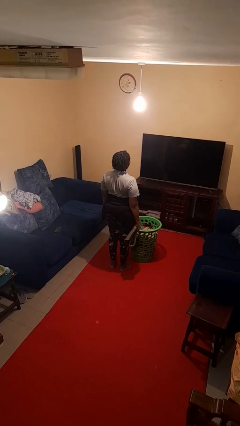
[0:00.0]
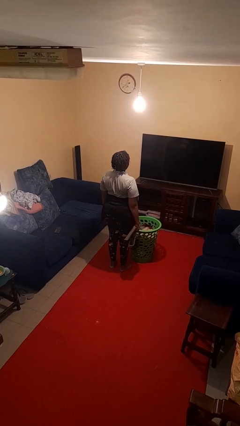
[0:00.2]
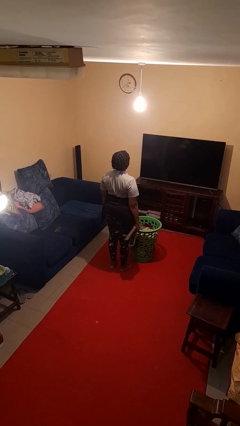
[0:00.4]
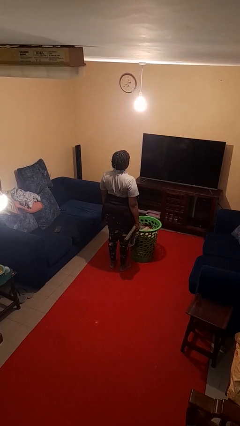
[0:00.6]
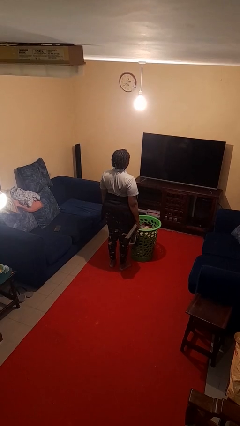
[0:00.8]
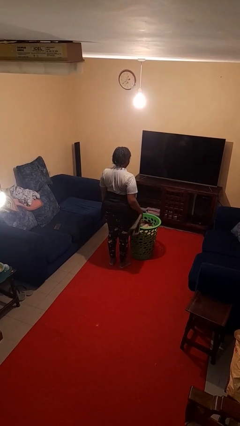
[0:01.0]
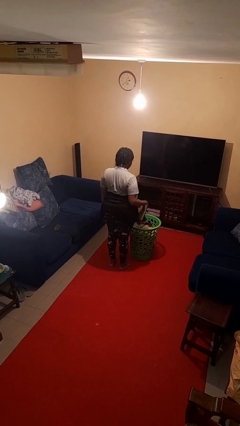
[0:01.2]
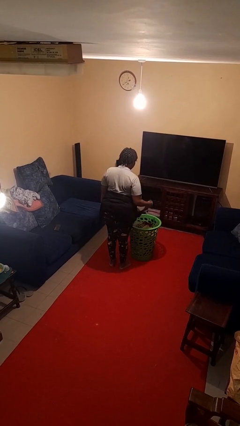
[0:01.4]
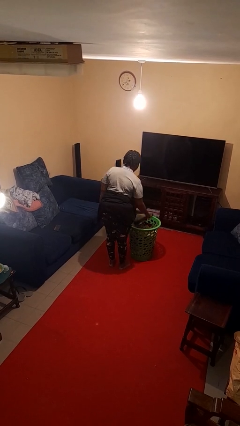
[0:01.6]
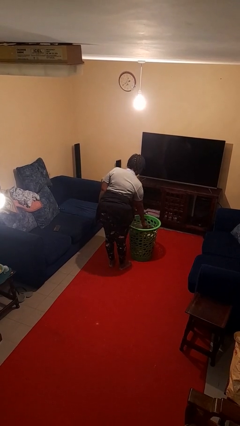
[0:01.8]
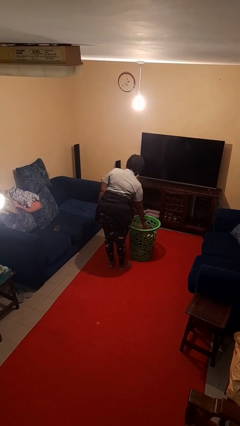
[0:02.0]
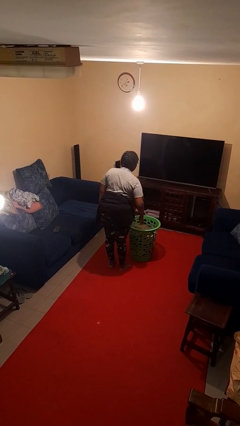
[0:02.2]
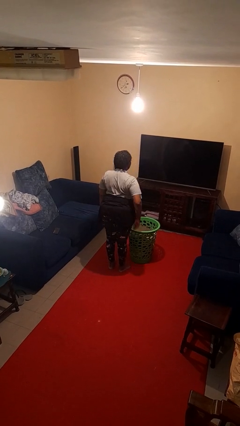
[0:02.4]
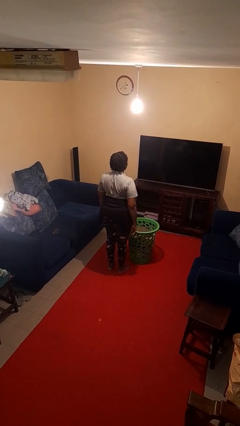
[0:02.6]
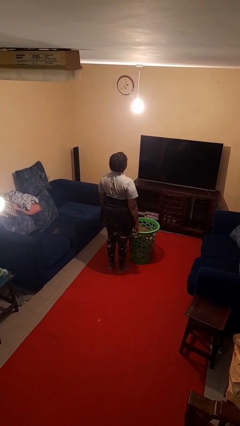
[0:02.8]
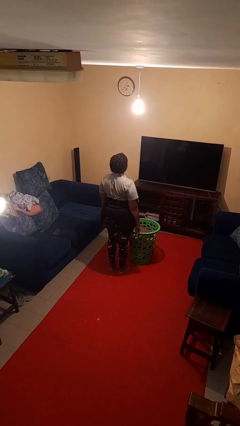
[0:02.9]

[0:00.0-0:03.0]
person puts object into basket

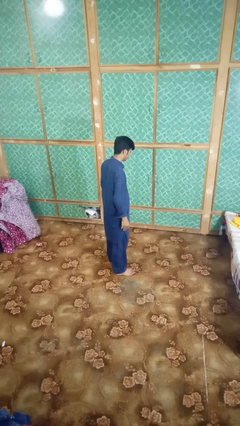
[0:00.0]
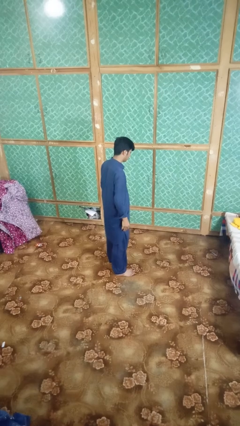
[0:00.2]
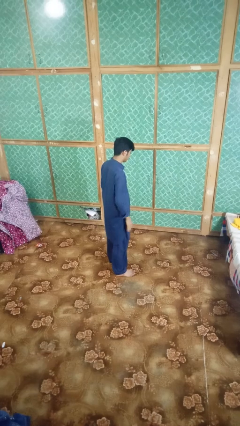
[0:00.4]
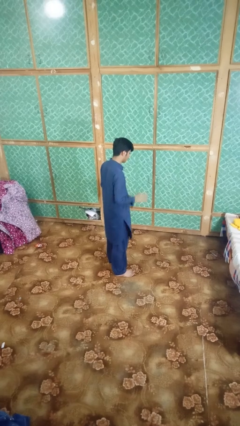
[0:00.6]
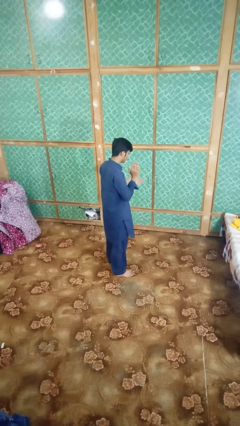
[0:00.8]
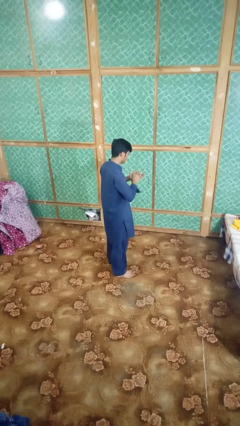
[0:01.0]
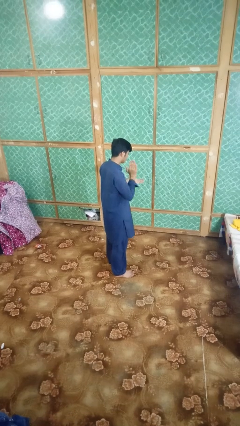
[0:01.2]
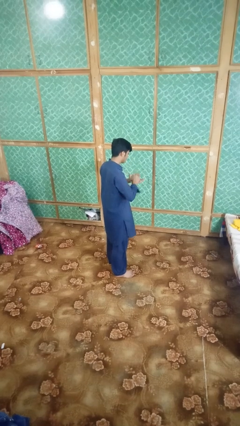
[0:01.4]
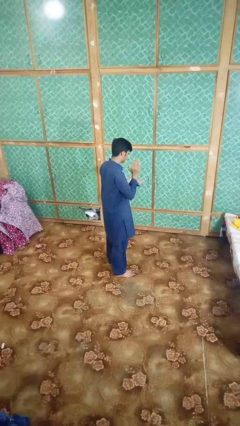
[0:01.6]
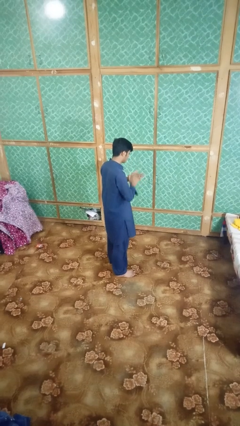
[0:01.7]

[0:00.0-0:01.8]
person claps hands

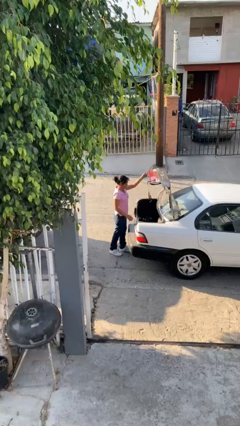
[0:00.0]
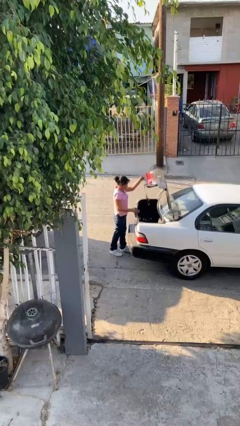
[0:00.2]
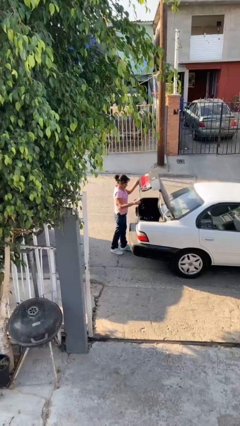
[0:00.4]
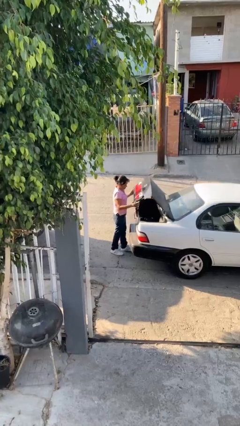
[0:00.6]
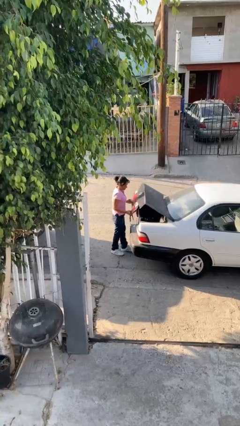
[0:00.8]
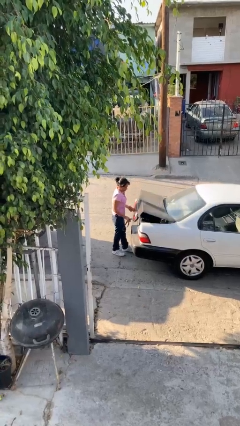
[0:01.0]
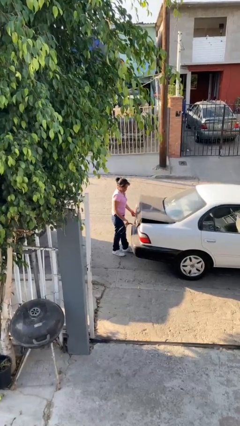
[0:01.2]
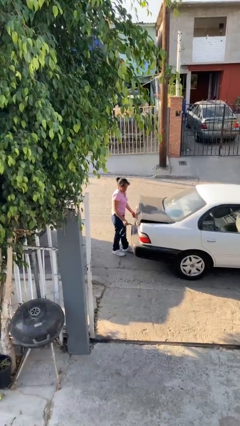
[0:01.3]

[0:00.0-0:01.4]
person closes car trunk

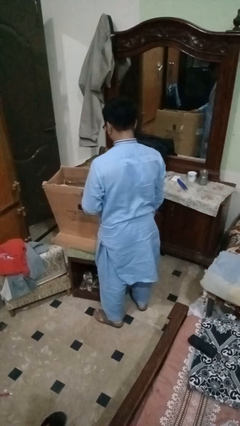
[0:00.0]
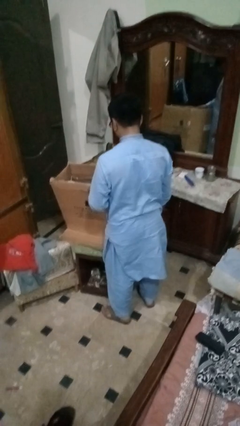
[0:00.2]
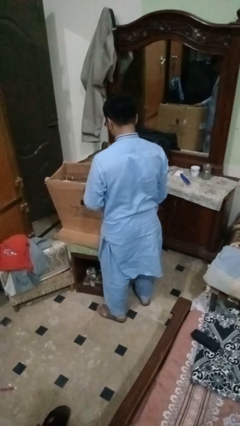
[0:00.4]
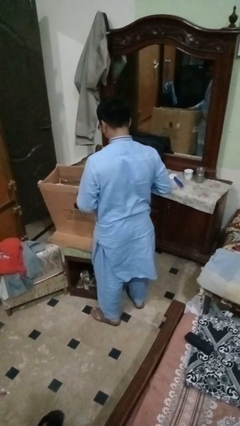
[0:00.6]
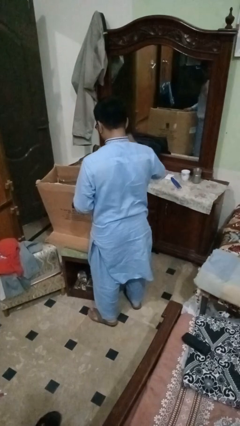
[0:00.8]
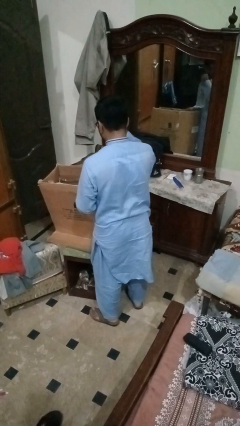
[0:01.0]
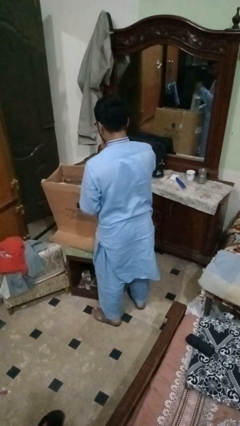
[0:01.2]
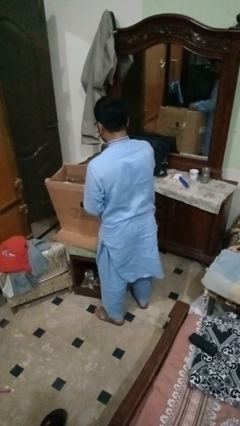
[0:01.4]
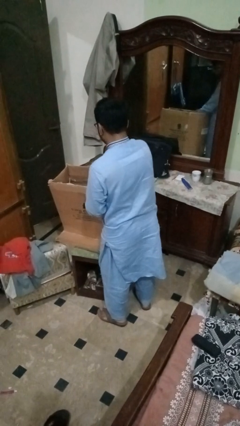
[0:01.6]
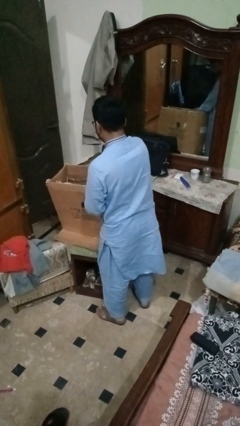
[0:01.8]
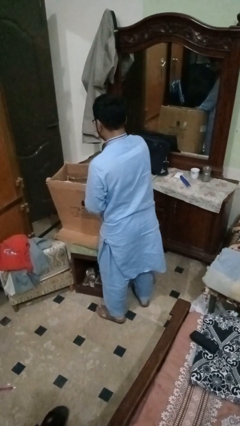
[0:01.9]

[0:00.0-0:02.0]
person puts object into box

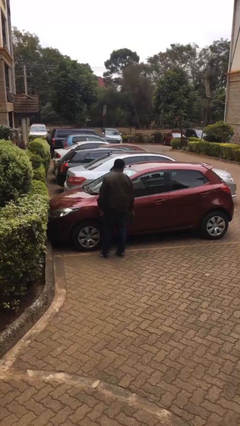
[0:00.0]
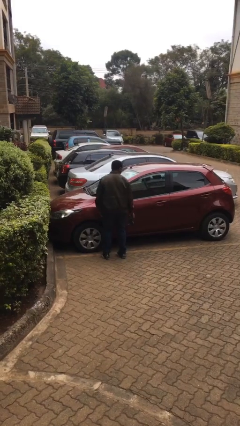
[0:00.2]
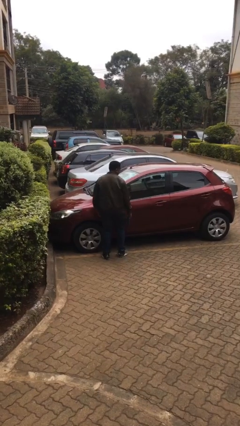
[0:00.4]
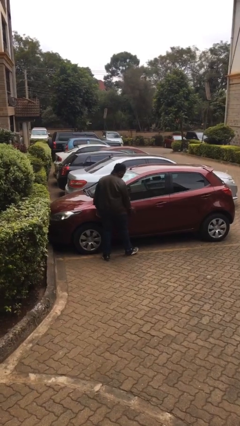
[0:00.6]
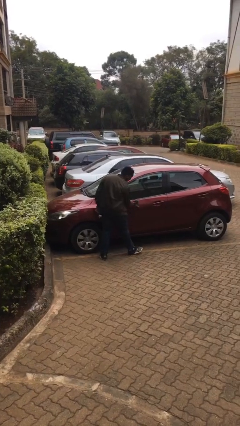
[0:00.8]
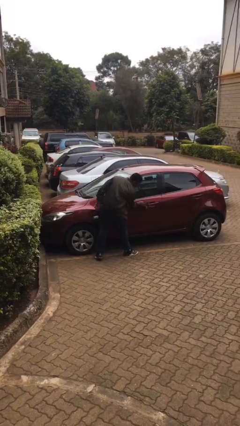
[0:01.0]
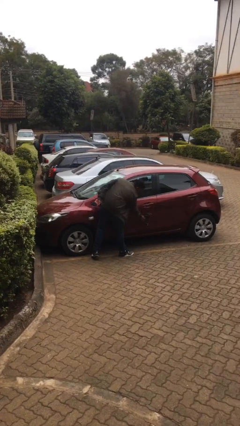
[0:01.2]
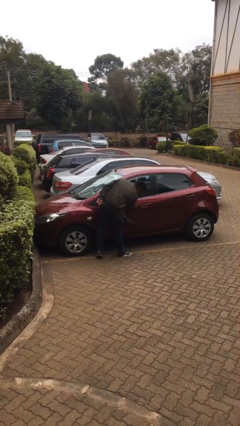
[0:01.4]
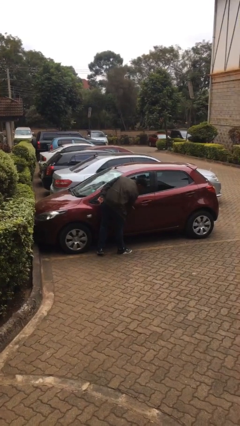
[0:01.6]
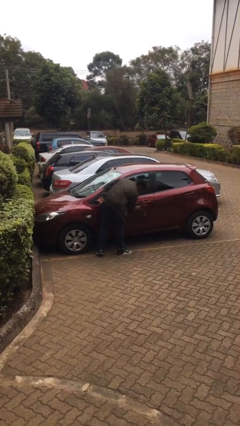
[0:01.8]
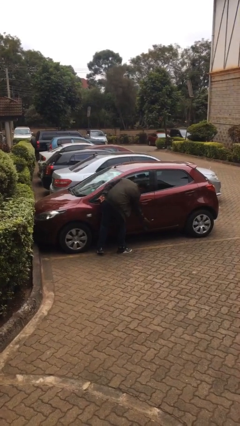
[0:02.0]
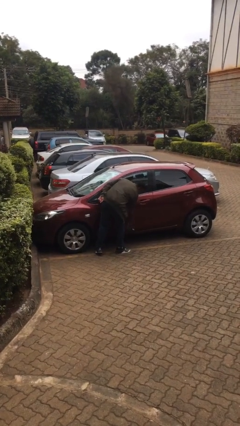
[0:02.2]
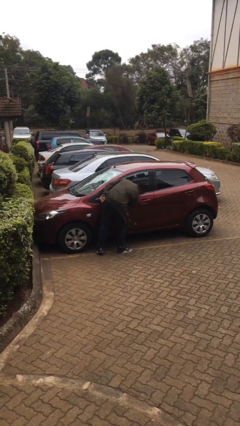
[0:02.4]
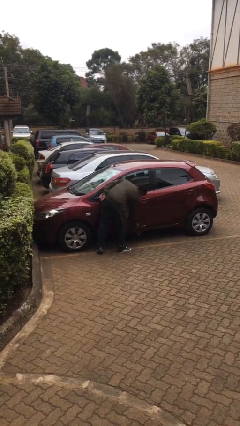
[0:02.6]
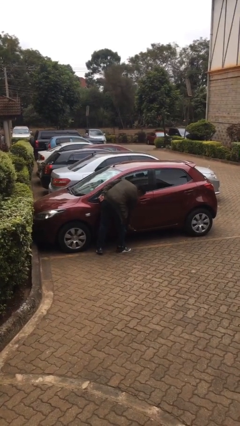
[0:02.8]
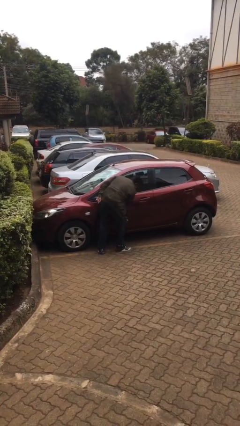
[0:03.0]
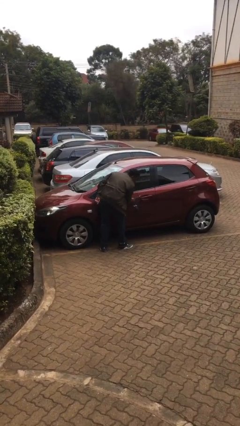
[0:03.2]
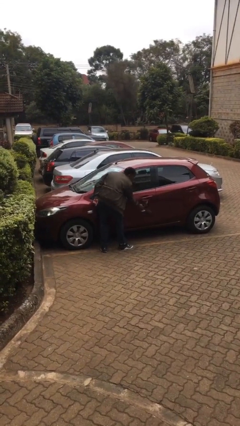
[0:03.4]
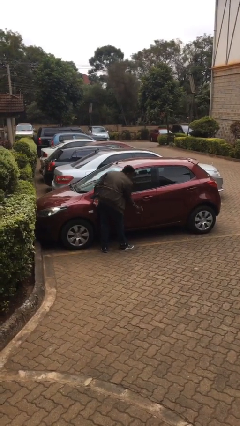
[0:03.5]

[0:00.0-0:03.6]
person polishes car with rag

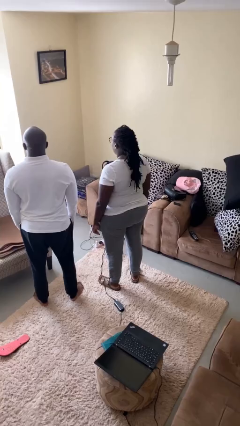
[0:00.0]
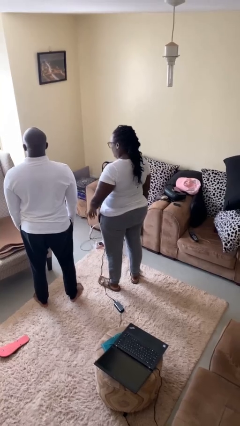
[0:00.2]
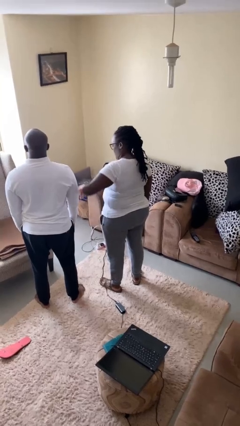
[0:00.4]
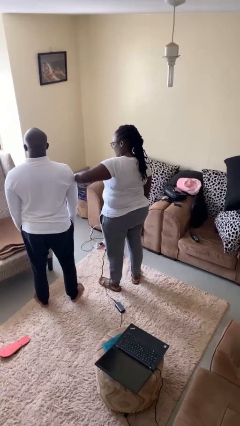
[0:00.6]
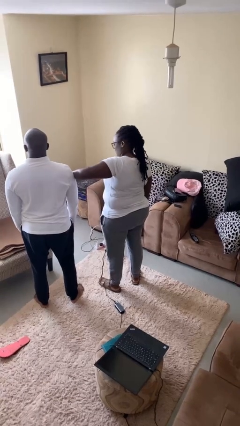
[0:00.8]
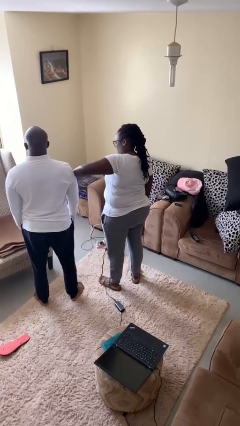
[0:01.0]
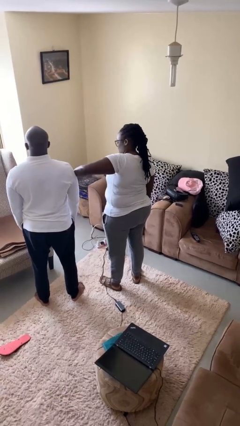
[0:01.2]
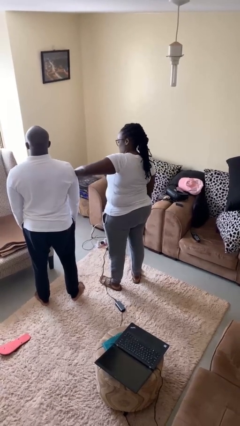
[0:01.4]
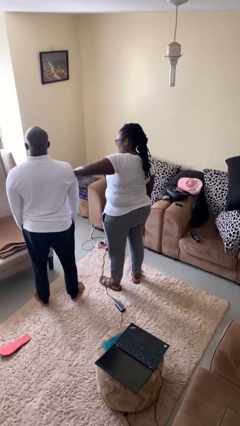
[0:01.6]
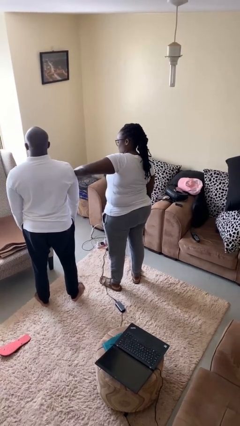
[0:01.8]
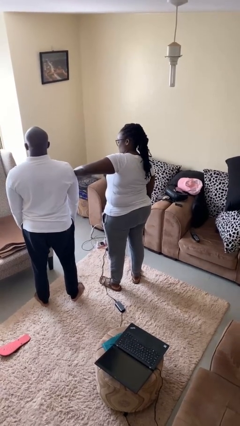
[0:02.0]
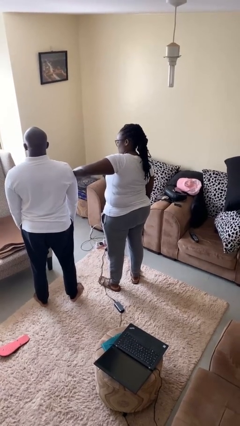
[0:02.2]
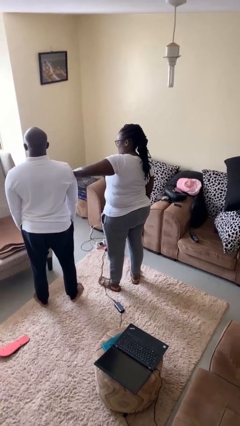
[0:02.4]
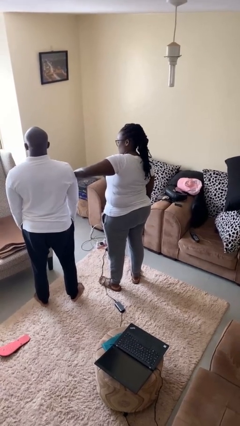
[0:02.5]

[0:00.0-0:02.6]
person grabs person by bicep

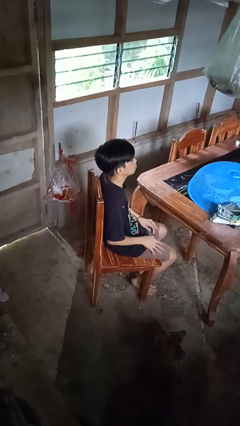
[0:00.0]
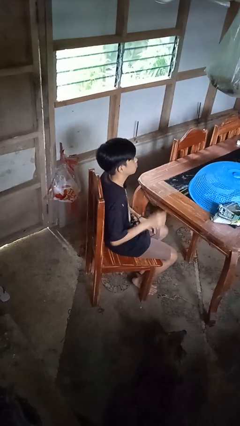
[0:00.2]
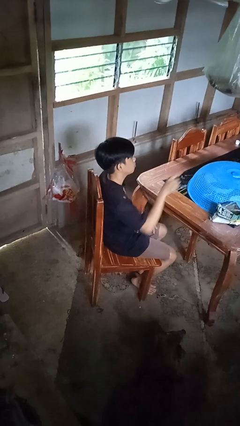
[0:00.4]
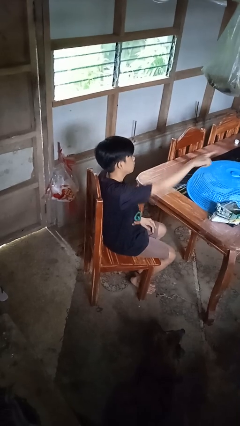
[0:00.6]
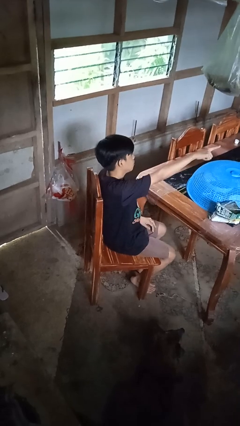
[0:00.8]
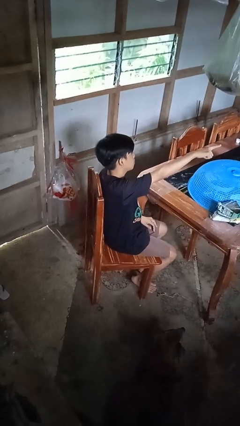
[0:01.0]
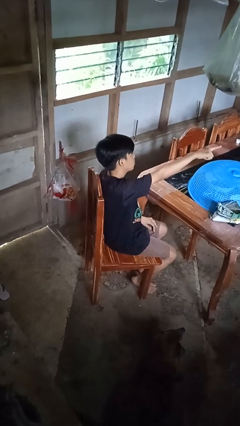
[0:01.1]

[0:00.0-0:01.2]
person points at person

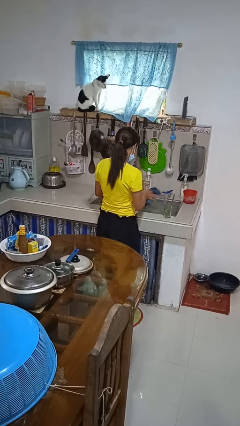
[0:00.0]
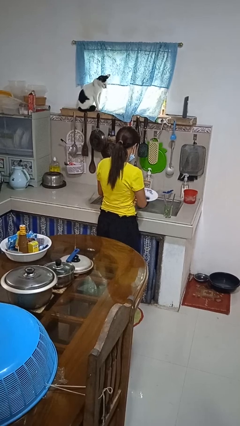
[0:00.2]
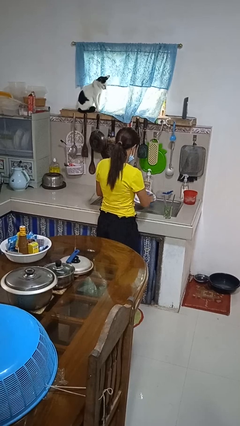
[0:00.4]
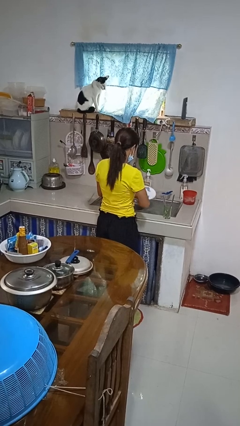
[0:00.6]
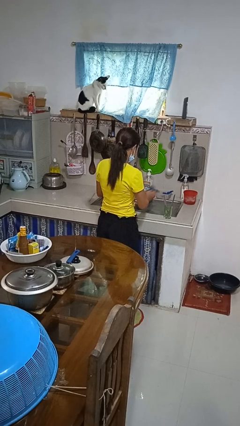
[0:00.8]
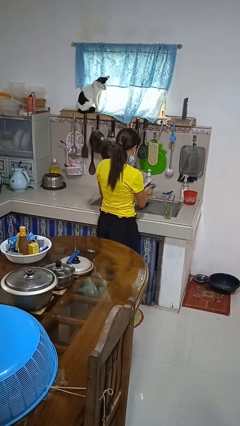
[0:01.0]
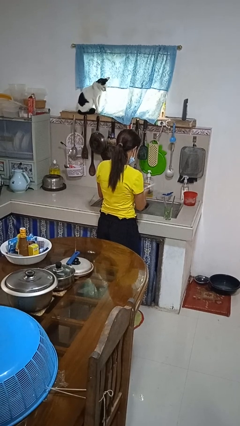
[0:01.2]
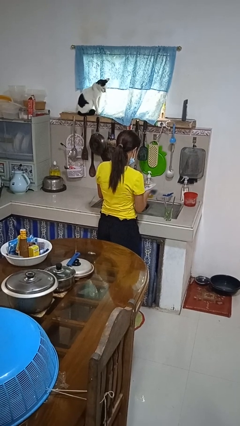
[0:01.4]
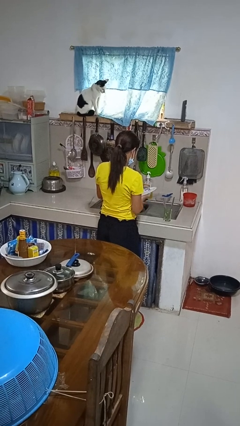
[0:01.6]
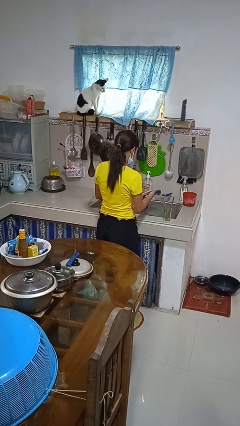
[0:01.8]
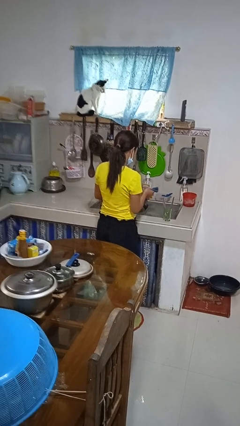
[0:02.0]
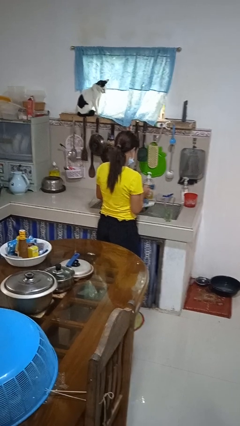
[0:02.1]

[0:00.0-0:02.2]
person dries dish
